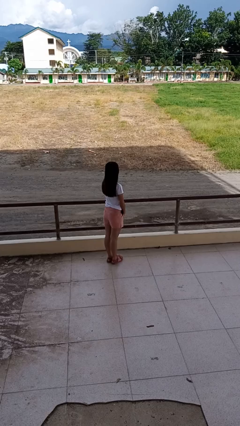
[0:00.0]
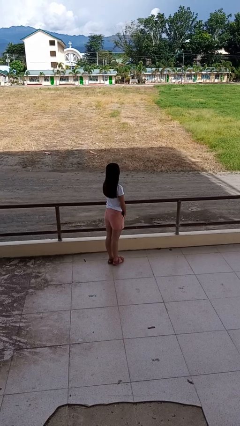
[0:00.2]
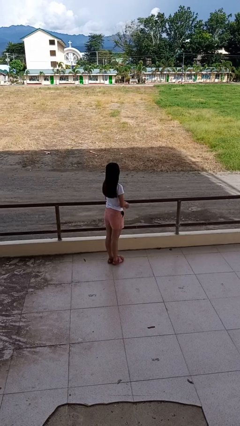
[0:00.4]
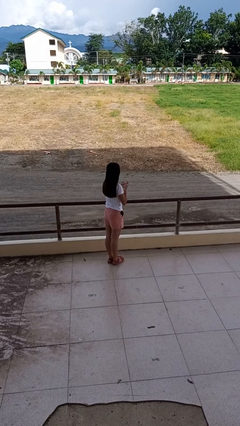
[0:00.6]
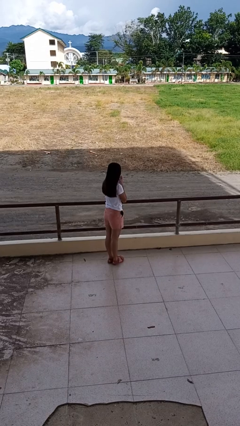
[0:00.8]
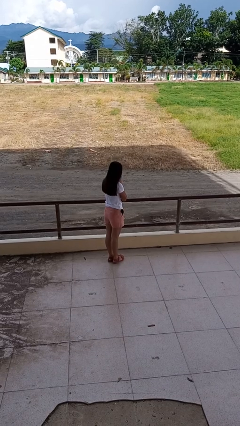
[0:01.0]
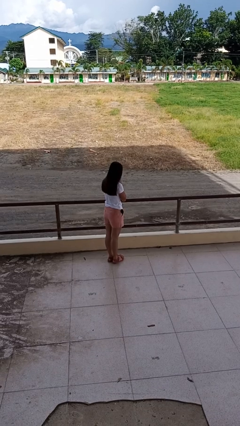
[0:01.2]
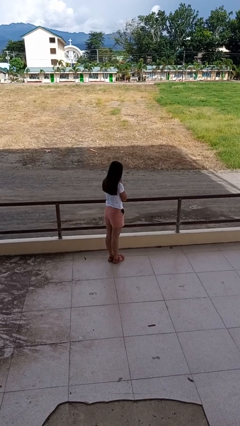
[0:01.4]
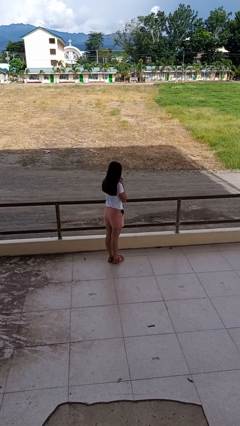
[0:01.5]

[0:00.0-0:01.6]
person sneezes into hand

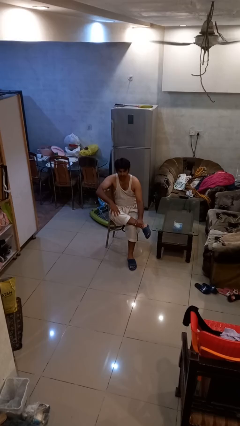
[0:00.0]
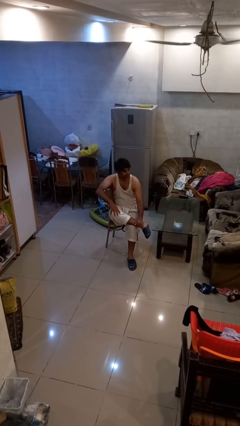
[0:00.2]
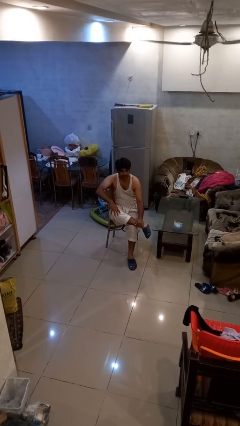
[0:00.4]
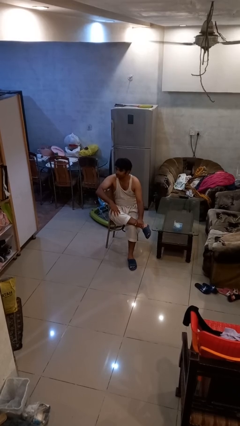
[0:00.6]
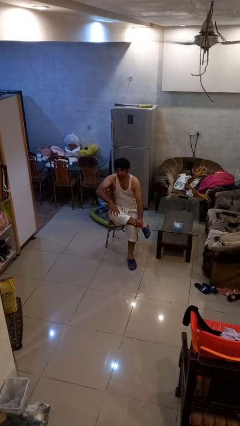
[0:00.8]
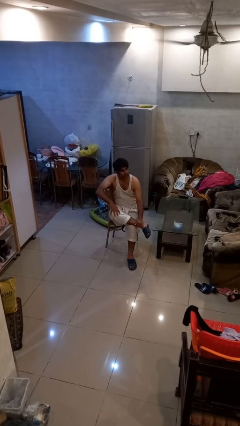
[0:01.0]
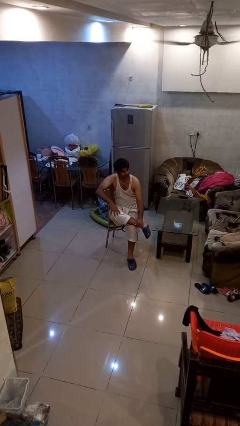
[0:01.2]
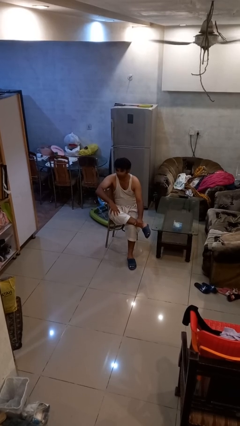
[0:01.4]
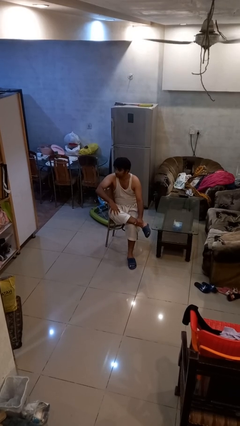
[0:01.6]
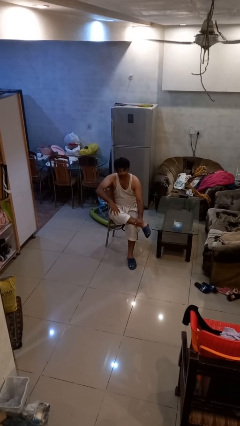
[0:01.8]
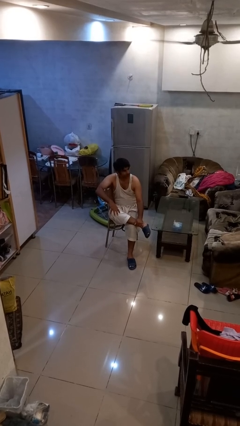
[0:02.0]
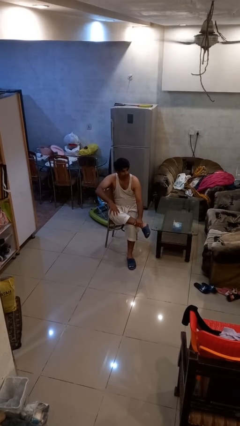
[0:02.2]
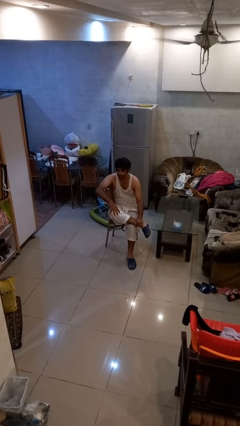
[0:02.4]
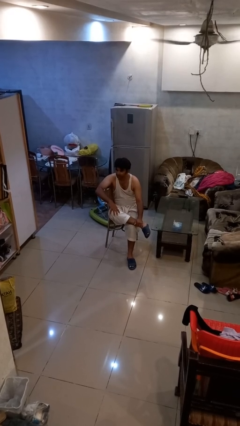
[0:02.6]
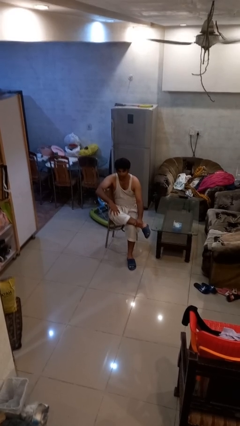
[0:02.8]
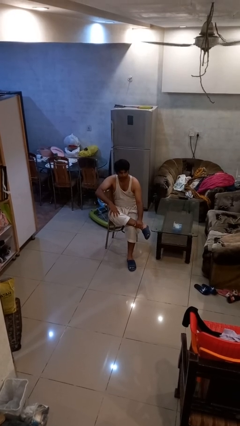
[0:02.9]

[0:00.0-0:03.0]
person shakes head

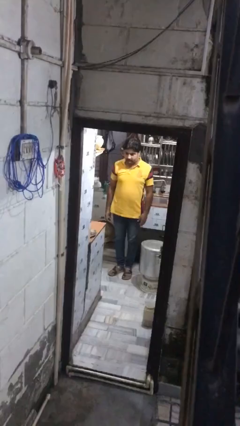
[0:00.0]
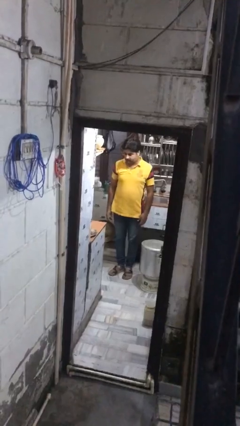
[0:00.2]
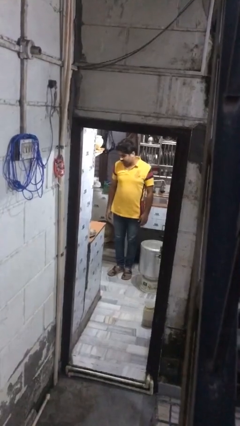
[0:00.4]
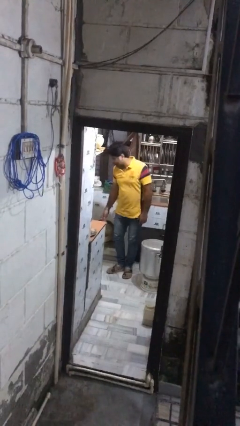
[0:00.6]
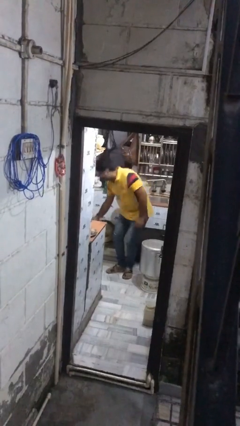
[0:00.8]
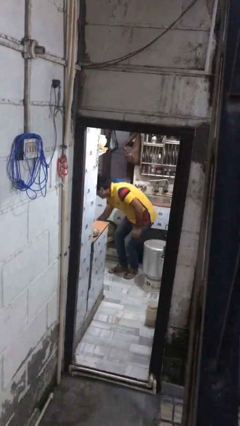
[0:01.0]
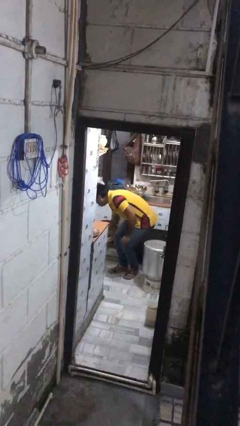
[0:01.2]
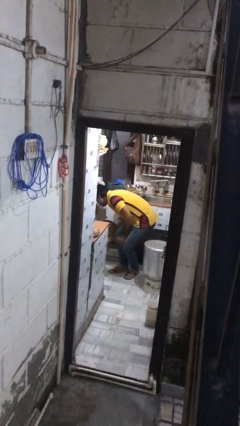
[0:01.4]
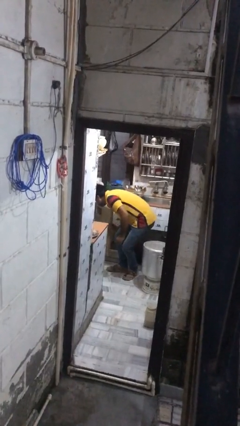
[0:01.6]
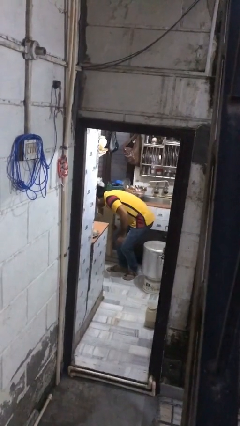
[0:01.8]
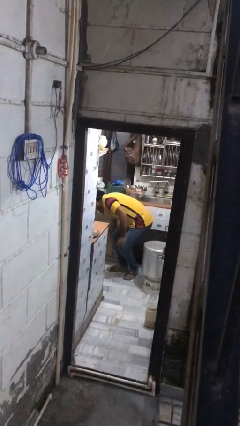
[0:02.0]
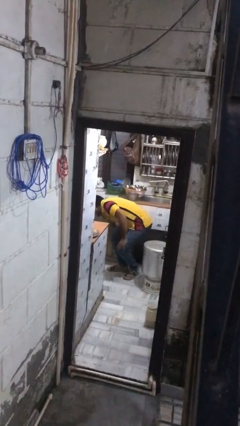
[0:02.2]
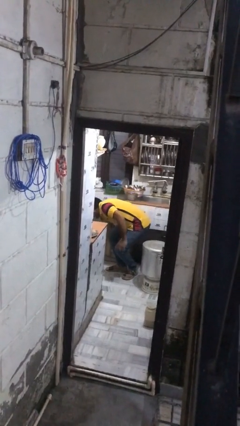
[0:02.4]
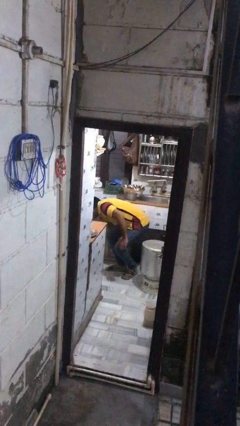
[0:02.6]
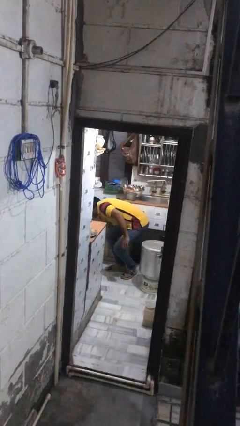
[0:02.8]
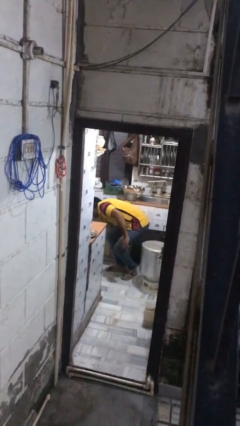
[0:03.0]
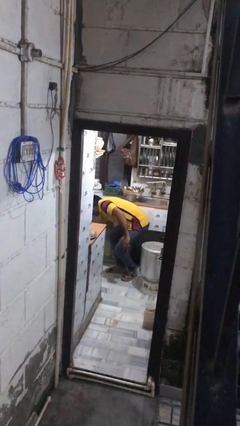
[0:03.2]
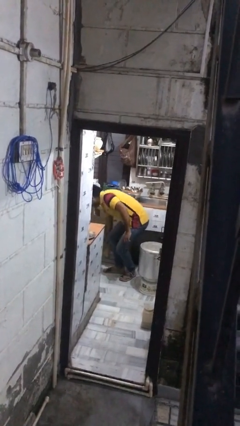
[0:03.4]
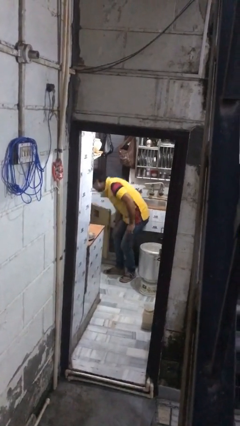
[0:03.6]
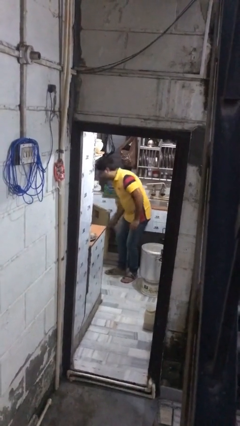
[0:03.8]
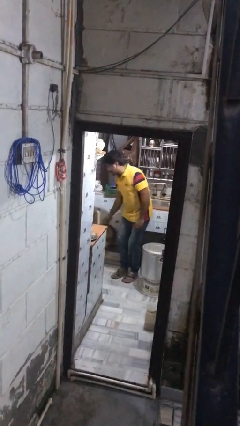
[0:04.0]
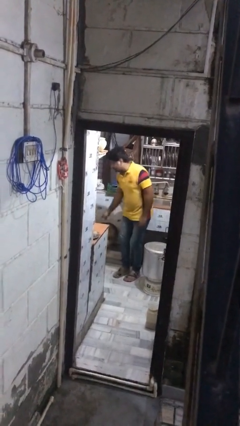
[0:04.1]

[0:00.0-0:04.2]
person searches in kitchen drawer

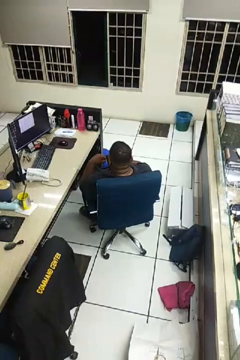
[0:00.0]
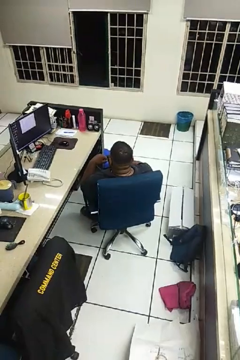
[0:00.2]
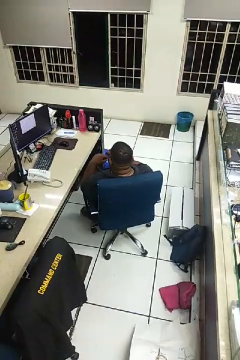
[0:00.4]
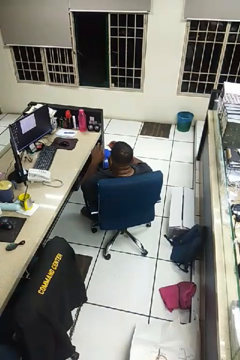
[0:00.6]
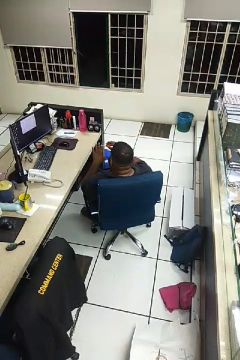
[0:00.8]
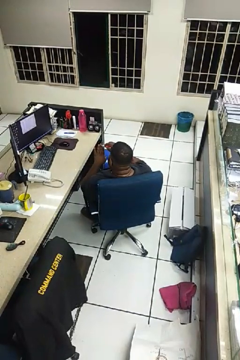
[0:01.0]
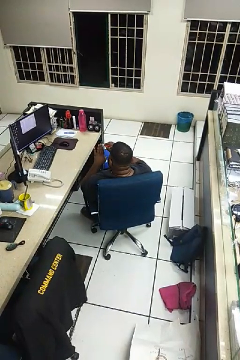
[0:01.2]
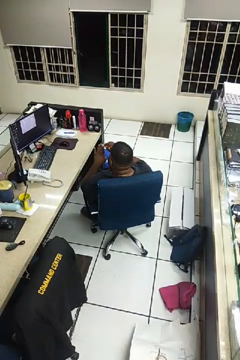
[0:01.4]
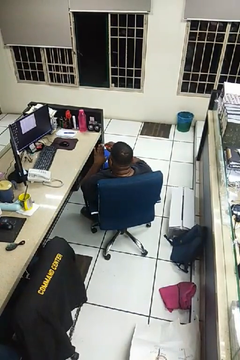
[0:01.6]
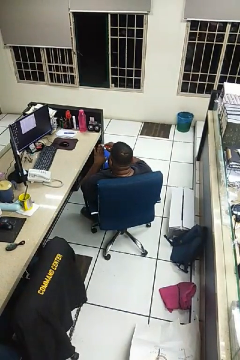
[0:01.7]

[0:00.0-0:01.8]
person paints fingernails

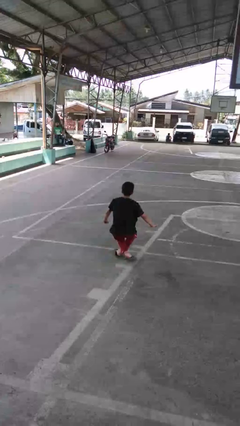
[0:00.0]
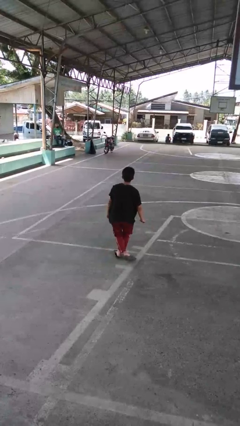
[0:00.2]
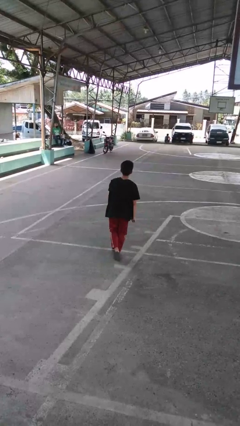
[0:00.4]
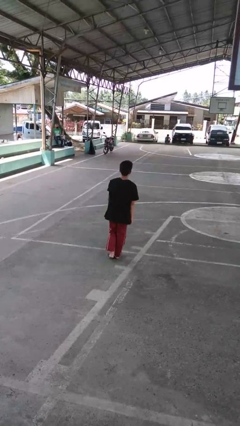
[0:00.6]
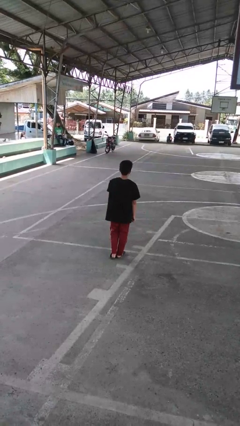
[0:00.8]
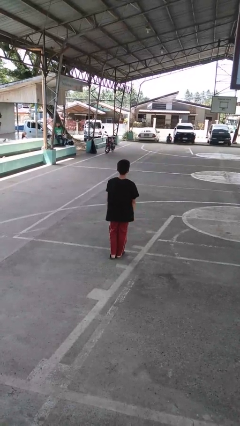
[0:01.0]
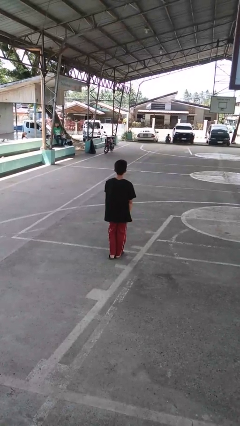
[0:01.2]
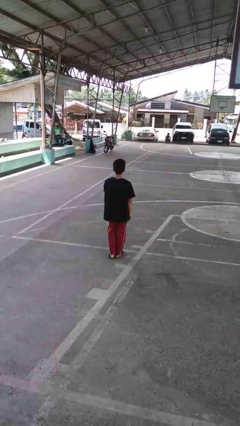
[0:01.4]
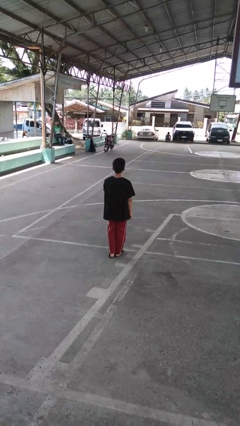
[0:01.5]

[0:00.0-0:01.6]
person stands up from floor

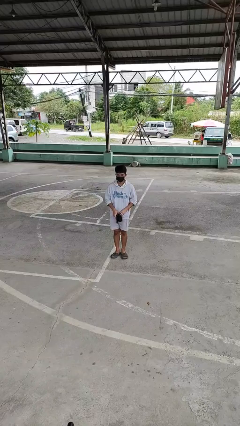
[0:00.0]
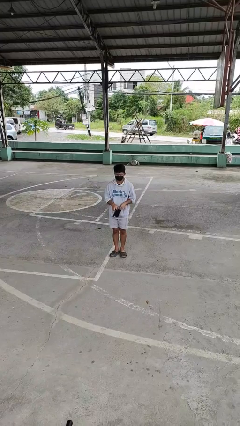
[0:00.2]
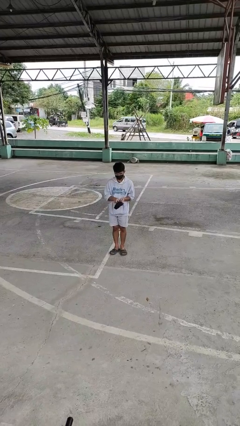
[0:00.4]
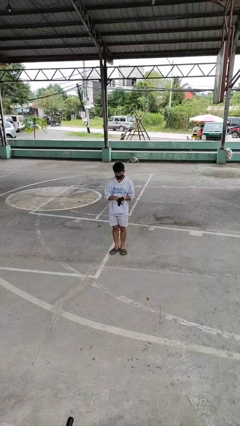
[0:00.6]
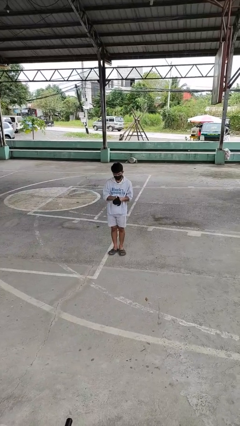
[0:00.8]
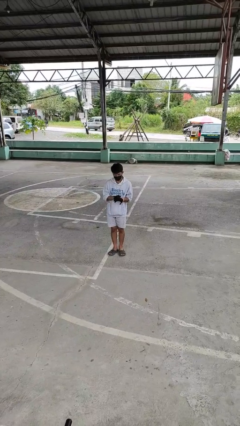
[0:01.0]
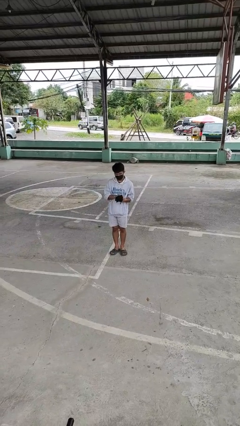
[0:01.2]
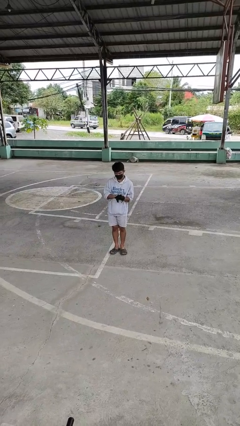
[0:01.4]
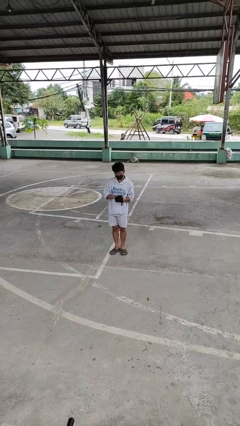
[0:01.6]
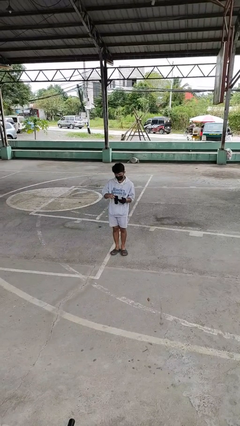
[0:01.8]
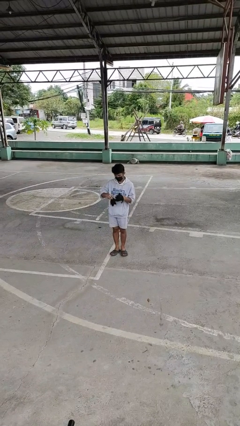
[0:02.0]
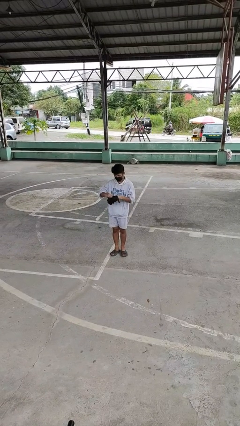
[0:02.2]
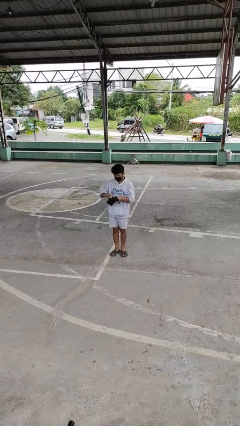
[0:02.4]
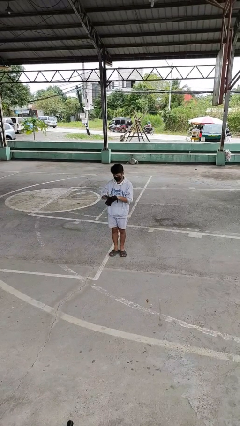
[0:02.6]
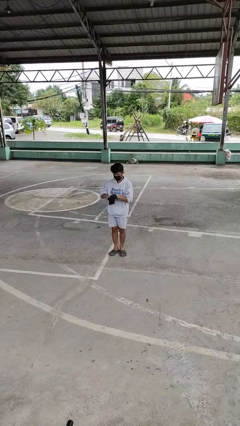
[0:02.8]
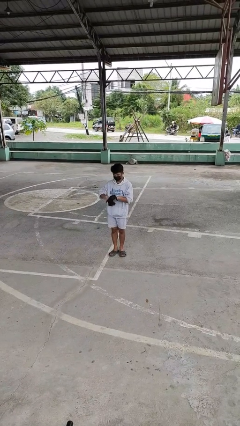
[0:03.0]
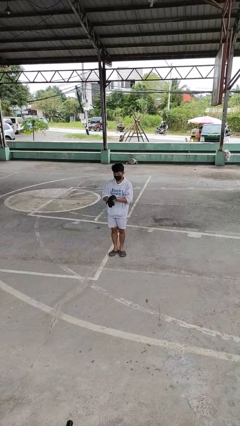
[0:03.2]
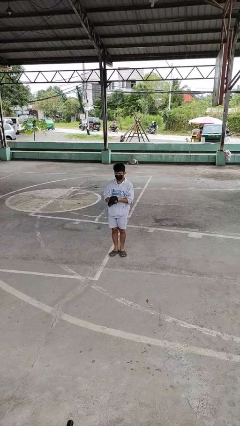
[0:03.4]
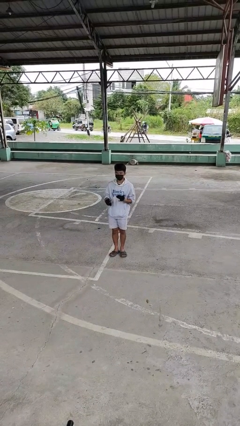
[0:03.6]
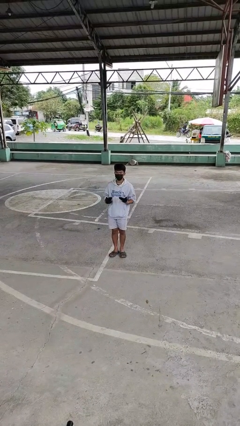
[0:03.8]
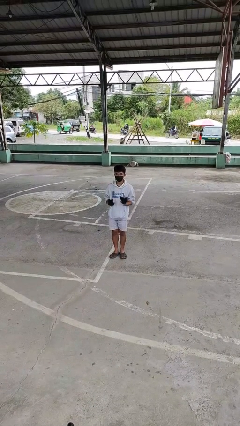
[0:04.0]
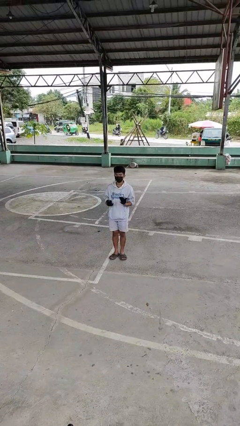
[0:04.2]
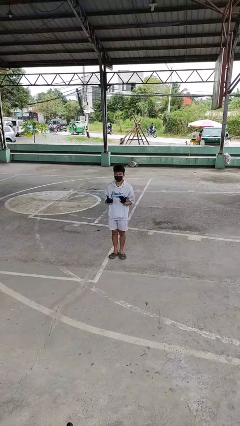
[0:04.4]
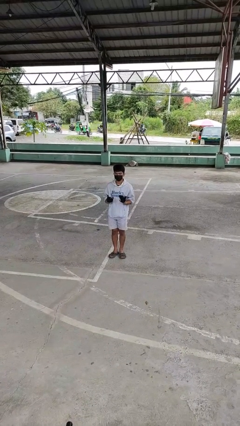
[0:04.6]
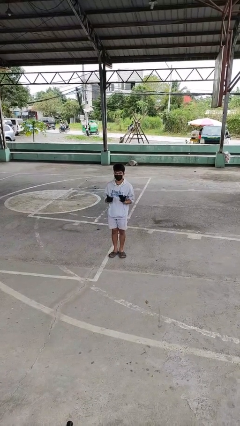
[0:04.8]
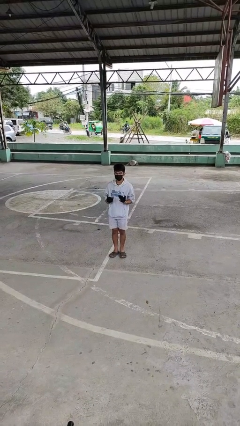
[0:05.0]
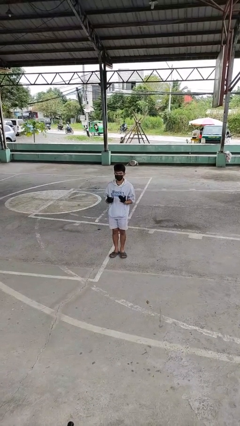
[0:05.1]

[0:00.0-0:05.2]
person puts on gloves
